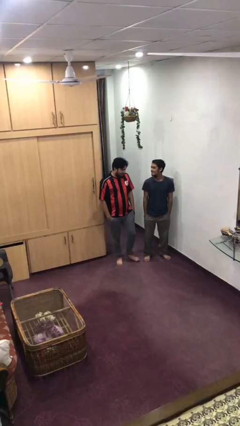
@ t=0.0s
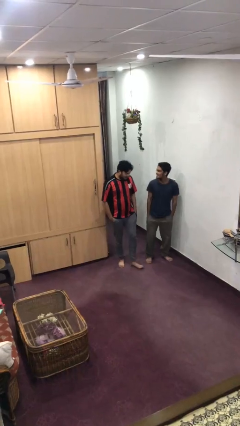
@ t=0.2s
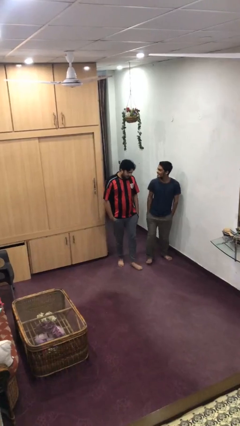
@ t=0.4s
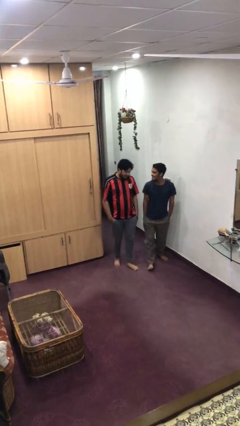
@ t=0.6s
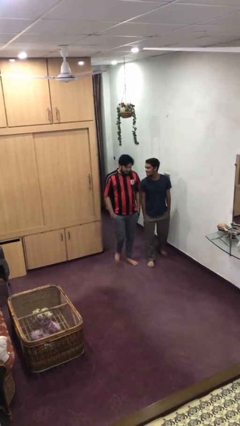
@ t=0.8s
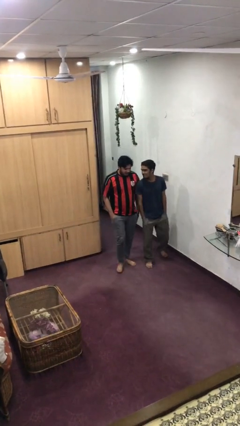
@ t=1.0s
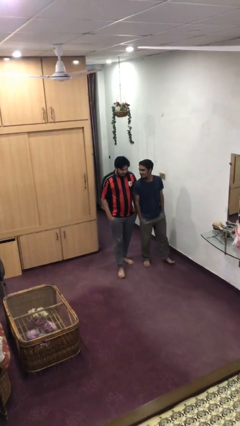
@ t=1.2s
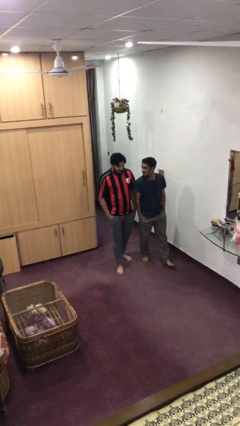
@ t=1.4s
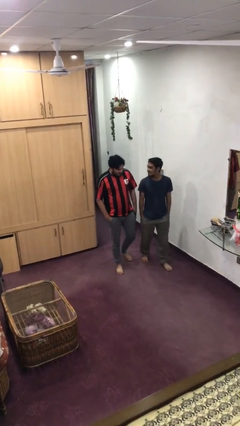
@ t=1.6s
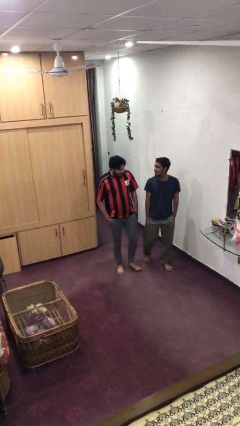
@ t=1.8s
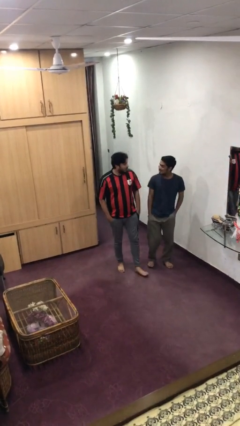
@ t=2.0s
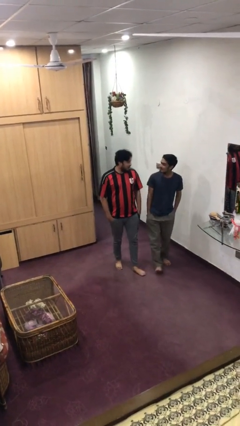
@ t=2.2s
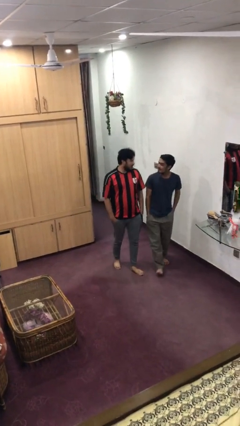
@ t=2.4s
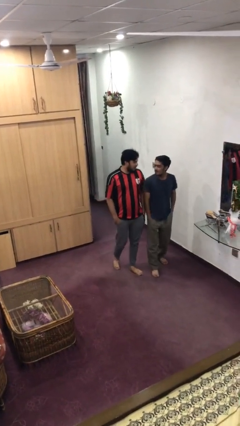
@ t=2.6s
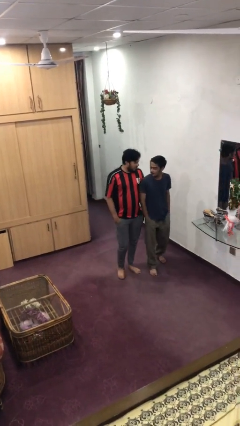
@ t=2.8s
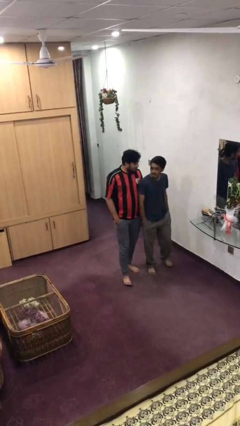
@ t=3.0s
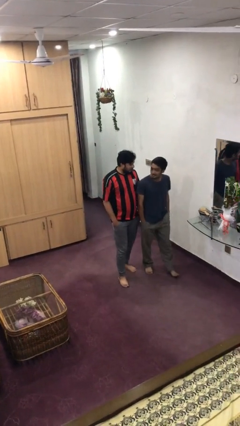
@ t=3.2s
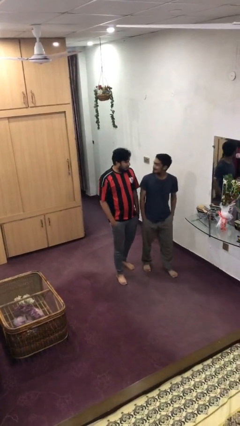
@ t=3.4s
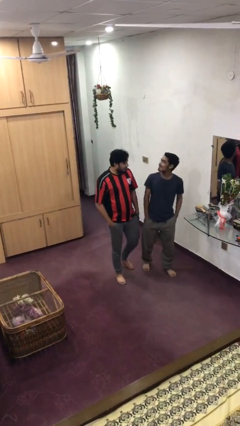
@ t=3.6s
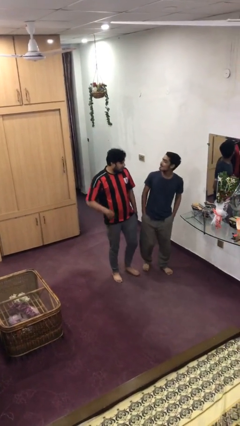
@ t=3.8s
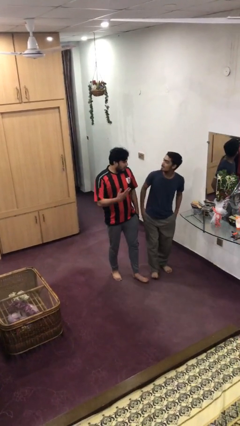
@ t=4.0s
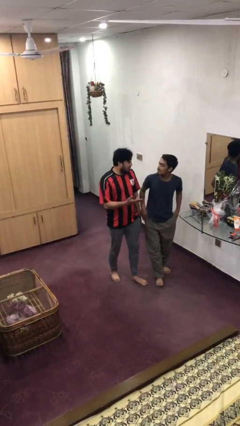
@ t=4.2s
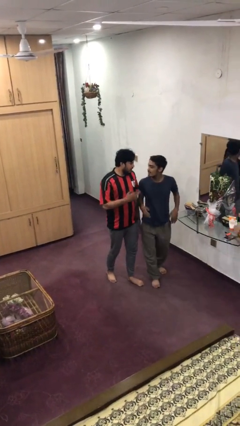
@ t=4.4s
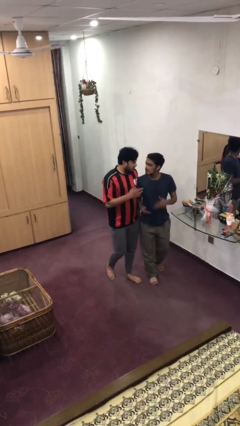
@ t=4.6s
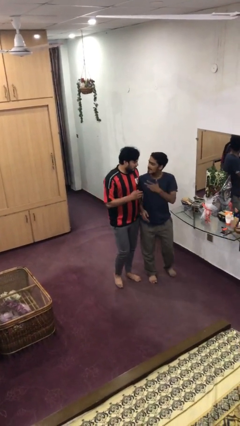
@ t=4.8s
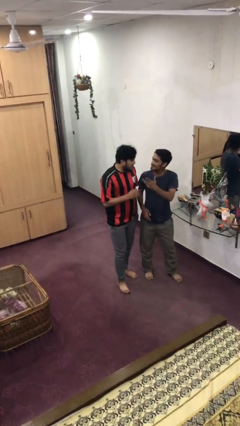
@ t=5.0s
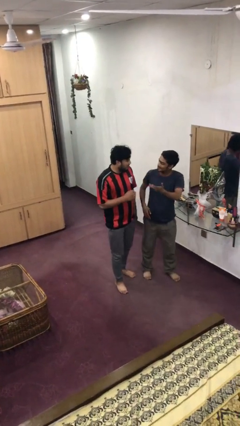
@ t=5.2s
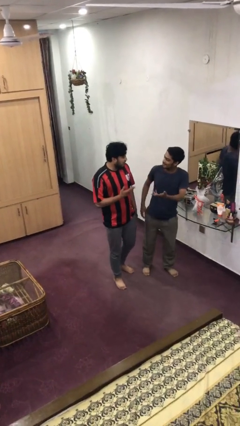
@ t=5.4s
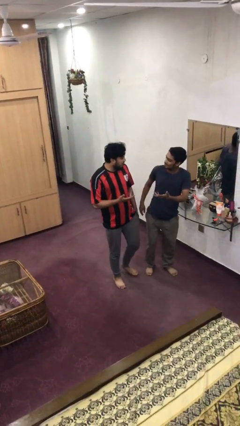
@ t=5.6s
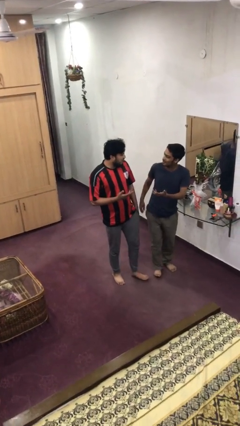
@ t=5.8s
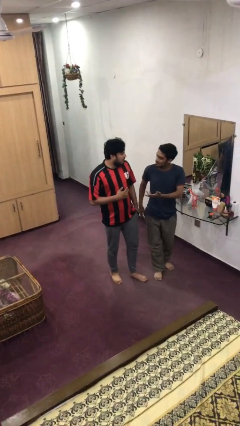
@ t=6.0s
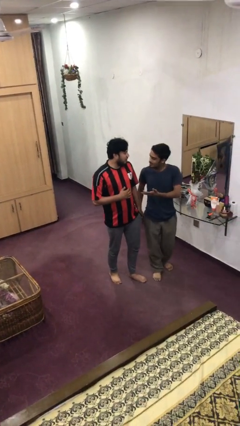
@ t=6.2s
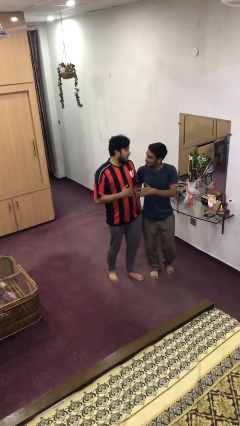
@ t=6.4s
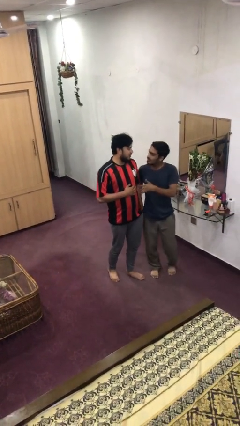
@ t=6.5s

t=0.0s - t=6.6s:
person talks to person

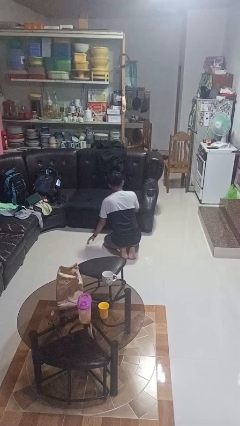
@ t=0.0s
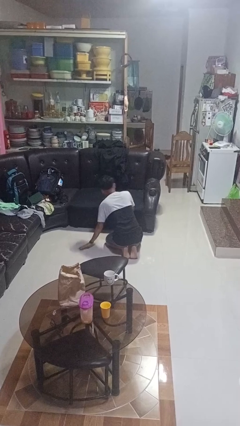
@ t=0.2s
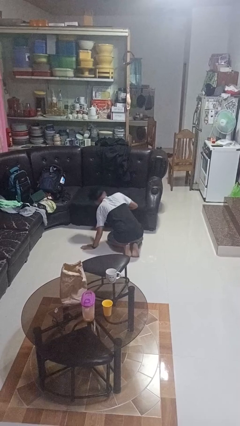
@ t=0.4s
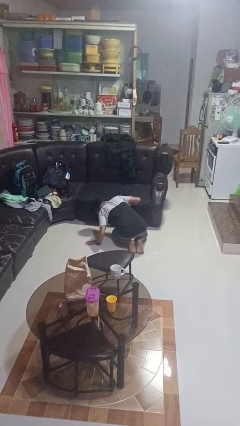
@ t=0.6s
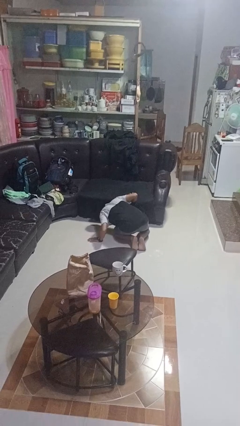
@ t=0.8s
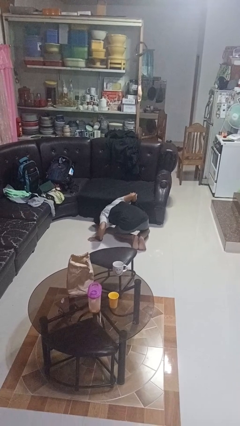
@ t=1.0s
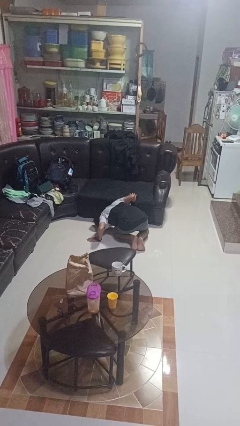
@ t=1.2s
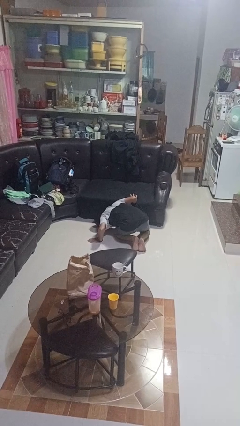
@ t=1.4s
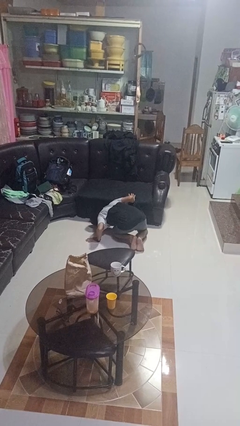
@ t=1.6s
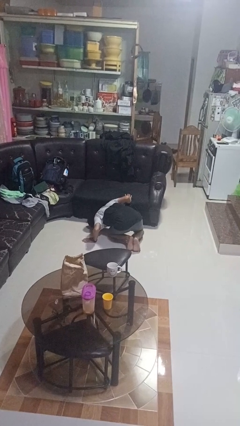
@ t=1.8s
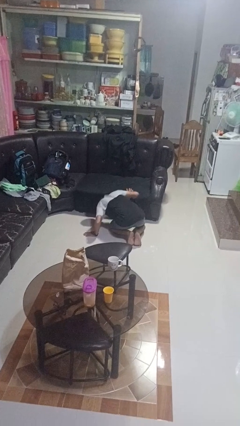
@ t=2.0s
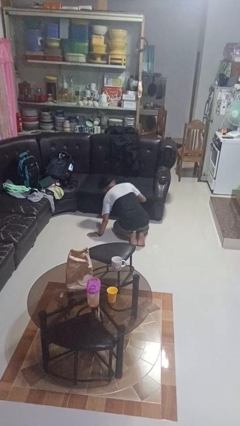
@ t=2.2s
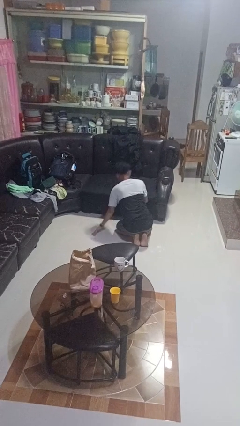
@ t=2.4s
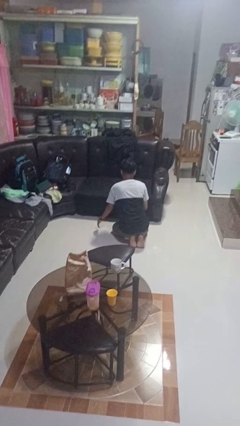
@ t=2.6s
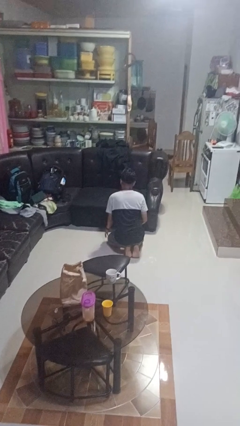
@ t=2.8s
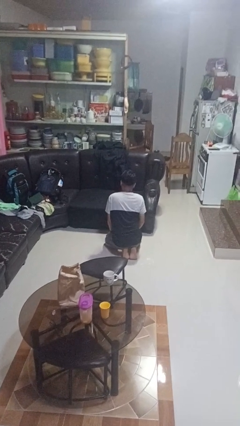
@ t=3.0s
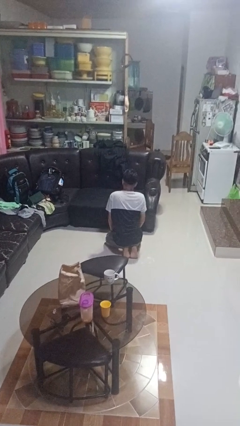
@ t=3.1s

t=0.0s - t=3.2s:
person searches under couch

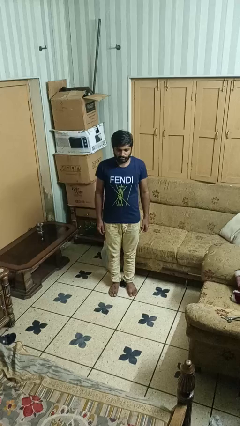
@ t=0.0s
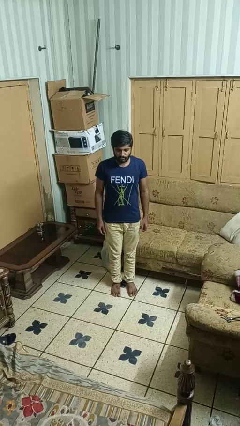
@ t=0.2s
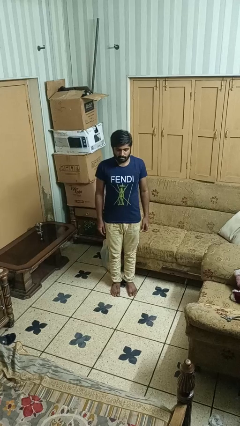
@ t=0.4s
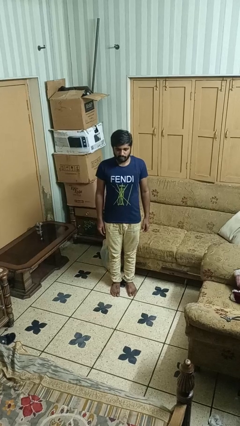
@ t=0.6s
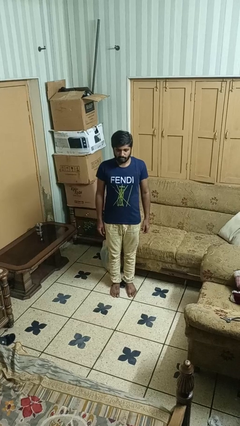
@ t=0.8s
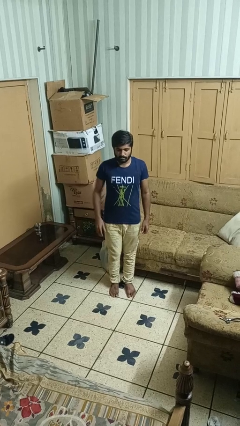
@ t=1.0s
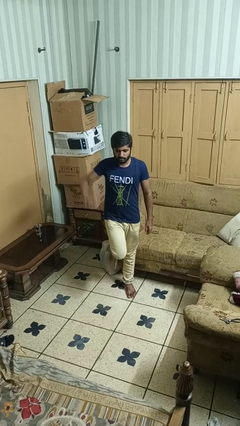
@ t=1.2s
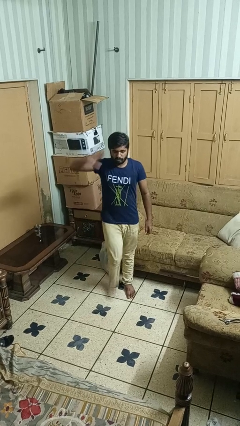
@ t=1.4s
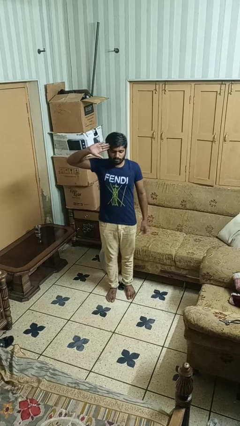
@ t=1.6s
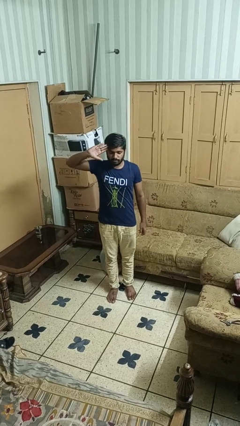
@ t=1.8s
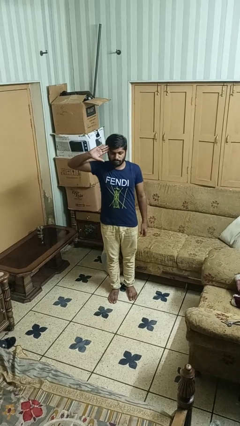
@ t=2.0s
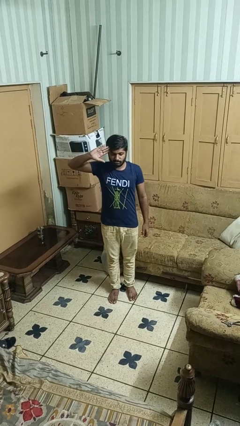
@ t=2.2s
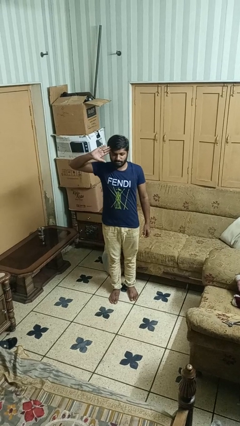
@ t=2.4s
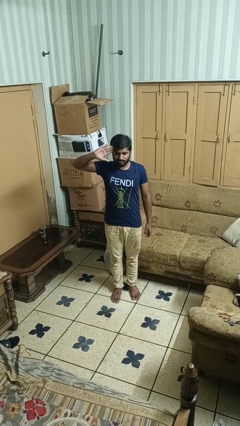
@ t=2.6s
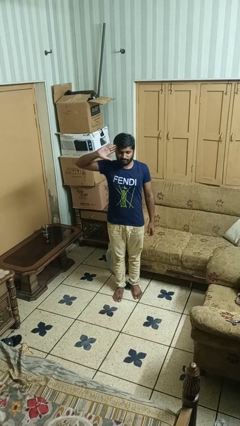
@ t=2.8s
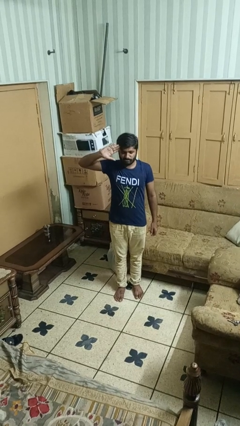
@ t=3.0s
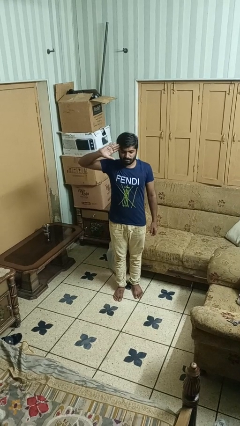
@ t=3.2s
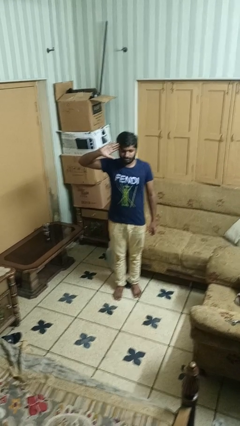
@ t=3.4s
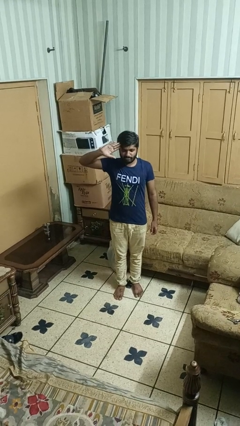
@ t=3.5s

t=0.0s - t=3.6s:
person salutes

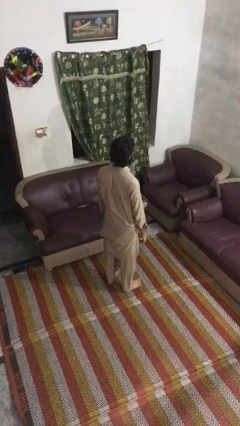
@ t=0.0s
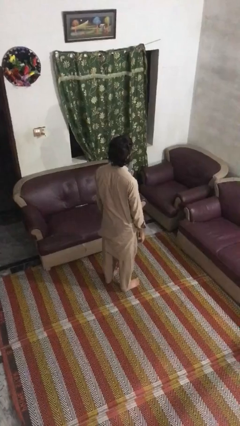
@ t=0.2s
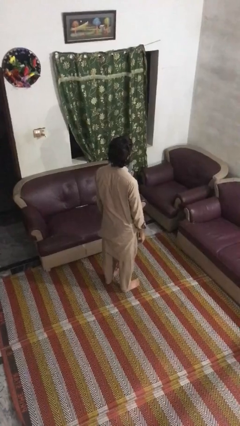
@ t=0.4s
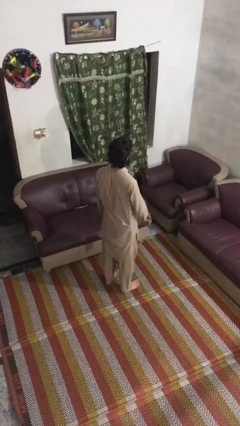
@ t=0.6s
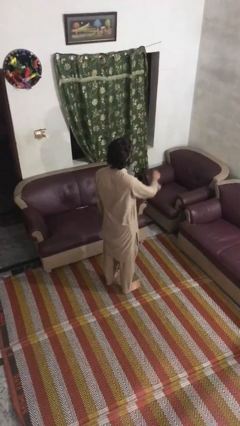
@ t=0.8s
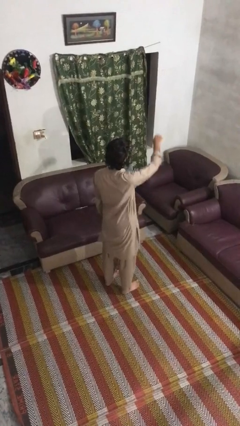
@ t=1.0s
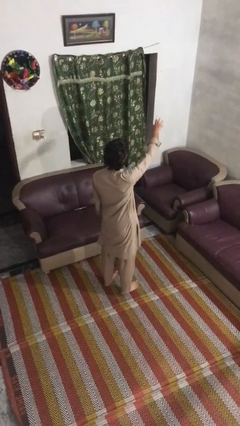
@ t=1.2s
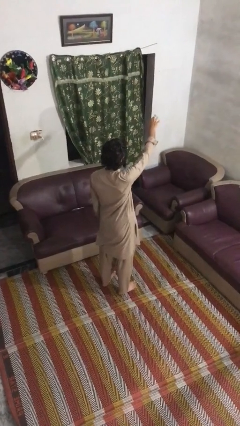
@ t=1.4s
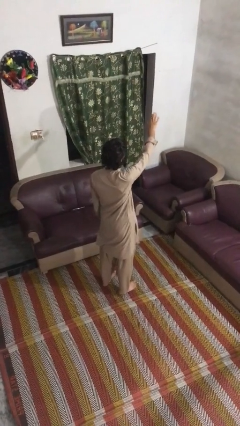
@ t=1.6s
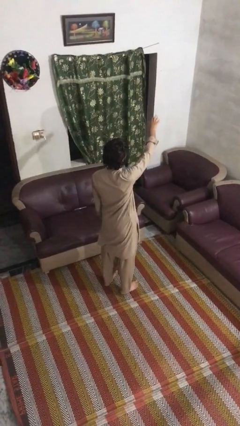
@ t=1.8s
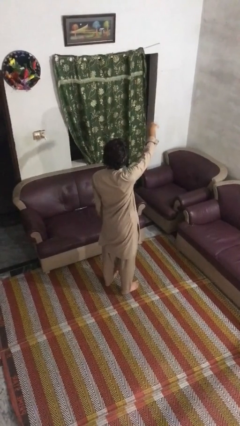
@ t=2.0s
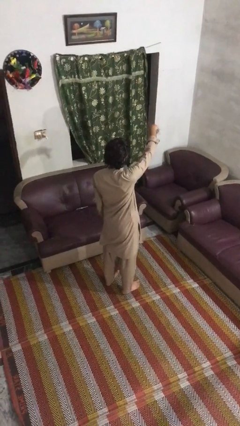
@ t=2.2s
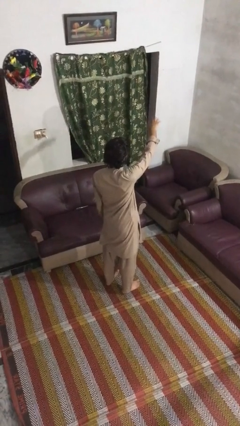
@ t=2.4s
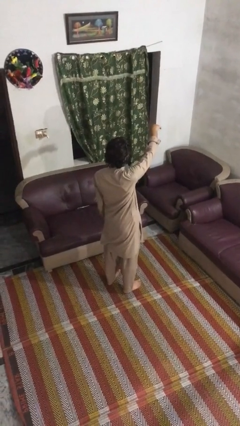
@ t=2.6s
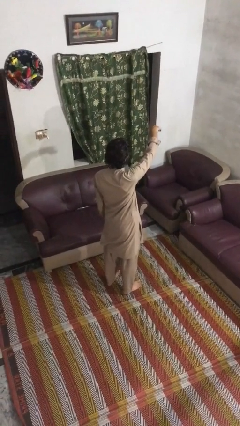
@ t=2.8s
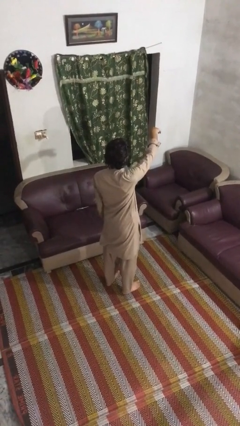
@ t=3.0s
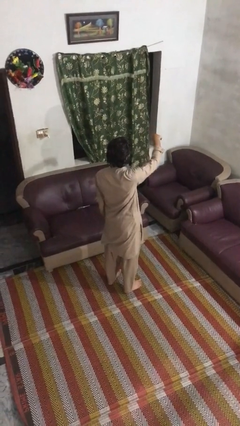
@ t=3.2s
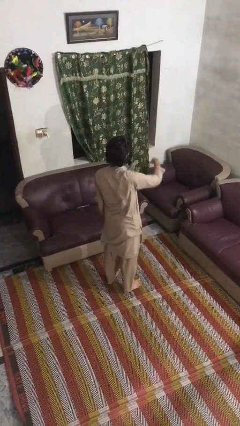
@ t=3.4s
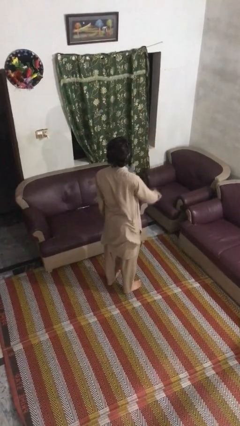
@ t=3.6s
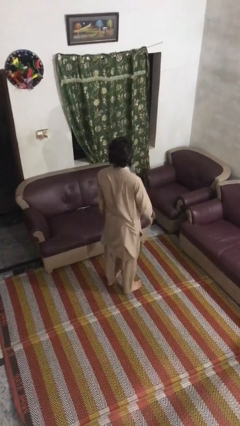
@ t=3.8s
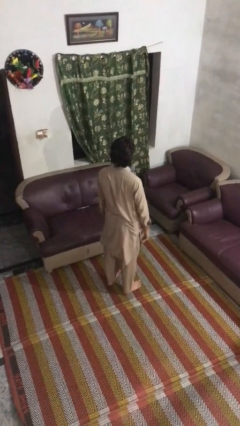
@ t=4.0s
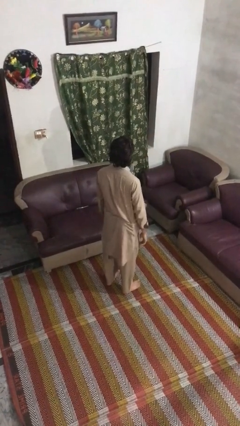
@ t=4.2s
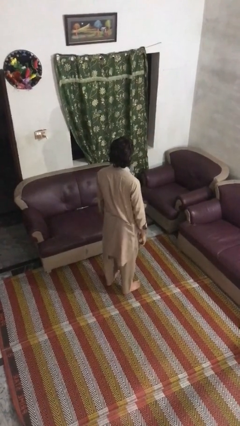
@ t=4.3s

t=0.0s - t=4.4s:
person gestures come here

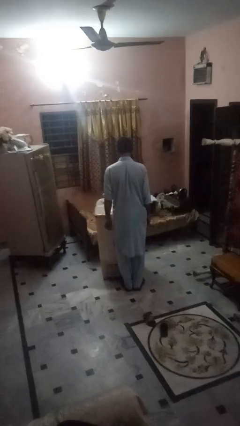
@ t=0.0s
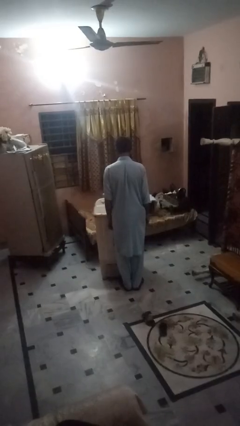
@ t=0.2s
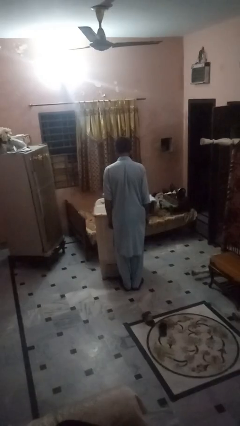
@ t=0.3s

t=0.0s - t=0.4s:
person closes clothes washer
